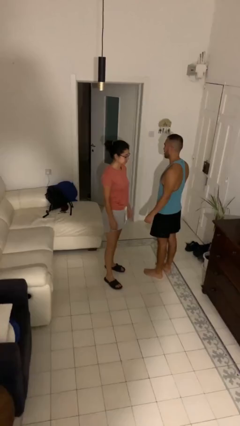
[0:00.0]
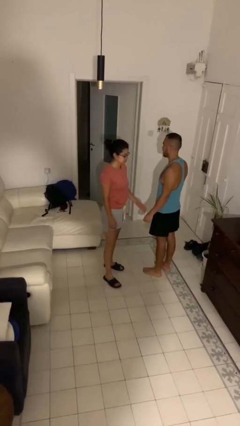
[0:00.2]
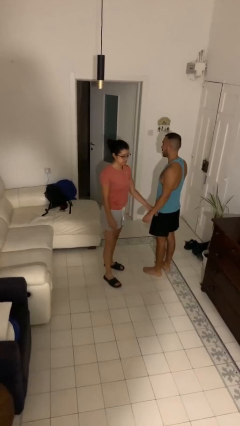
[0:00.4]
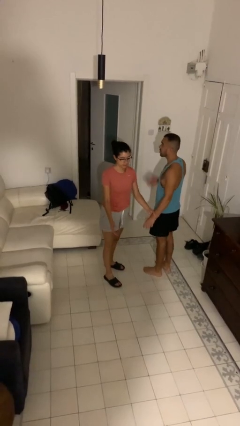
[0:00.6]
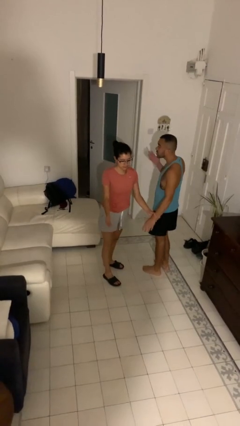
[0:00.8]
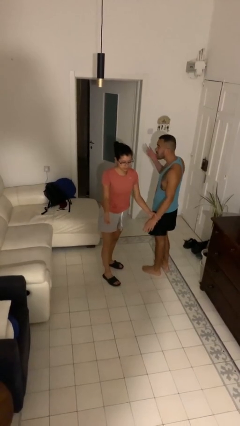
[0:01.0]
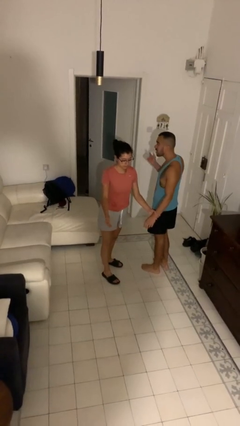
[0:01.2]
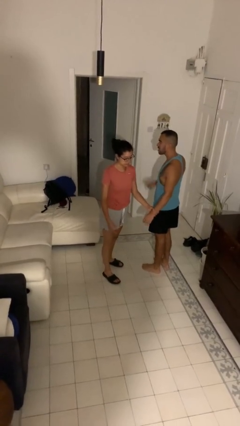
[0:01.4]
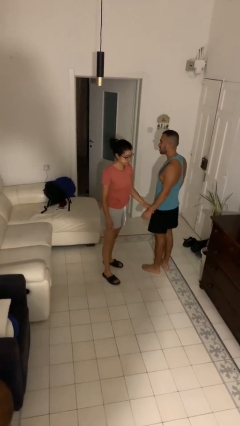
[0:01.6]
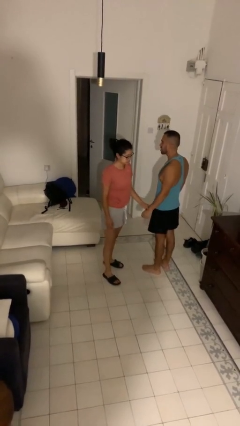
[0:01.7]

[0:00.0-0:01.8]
person grabs person by forearm

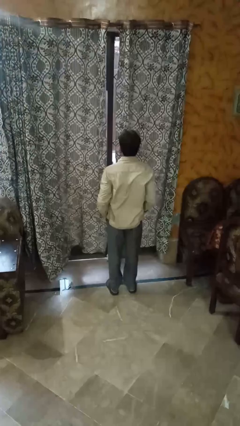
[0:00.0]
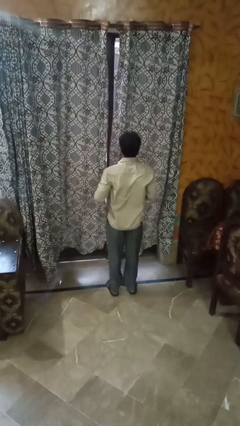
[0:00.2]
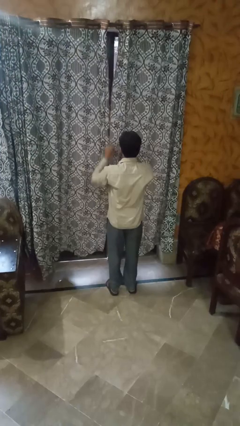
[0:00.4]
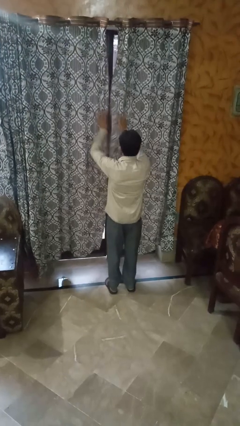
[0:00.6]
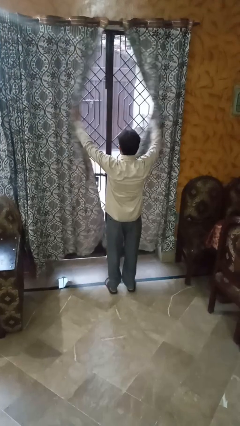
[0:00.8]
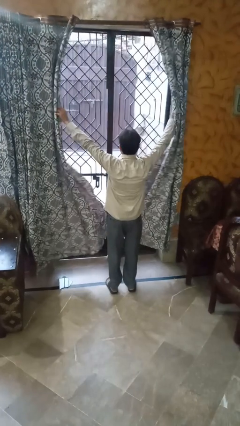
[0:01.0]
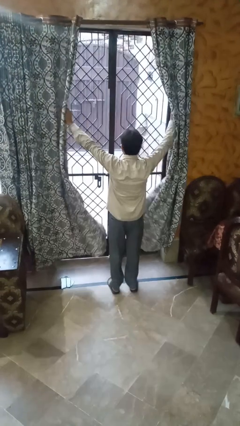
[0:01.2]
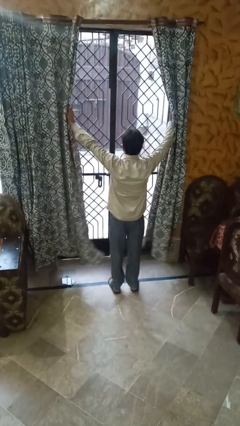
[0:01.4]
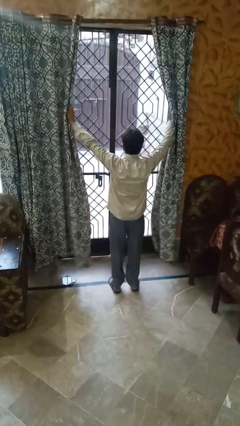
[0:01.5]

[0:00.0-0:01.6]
person opens curtains

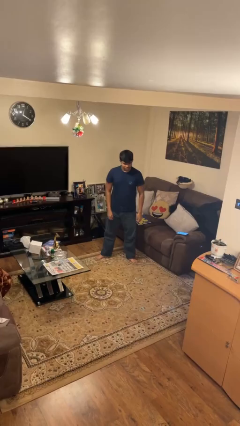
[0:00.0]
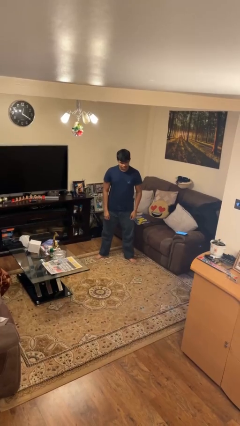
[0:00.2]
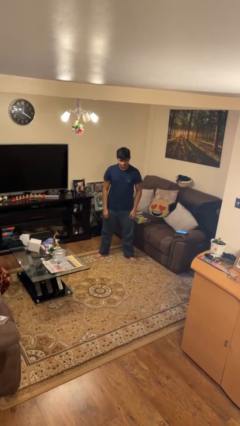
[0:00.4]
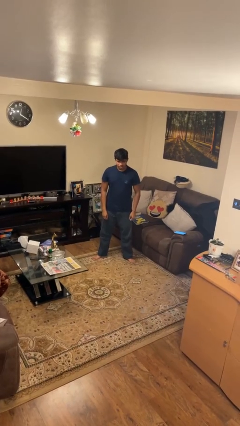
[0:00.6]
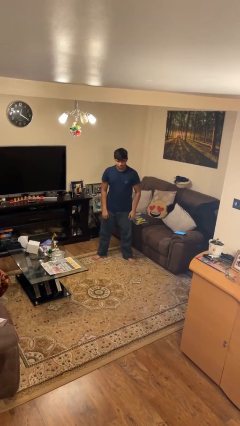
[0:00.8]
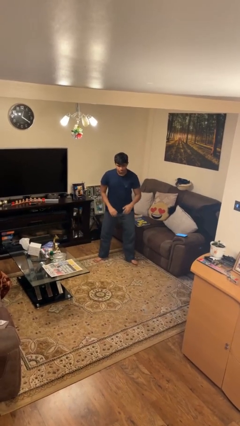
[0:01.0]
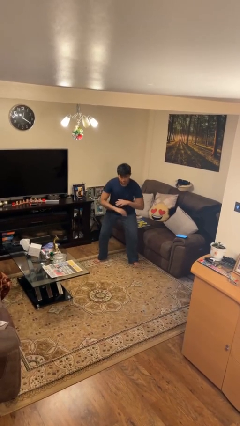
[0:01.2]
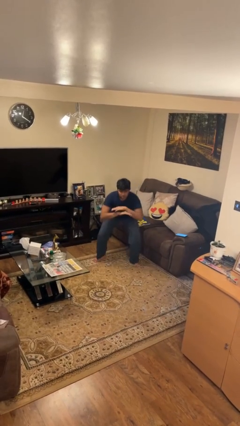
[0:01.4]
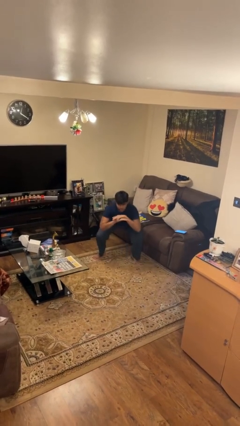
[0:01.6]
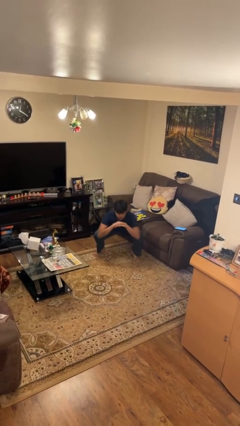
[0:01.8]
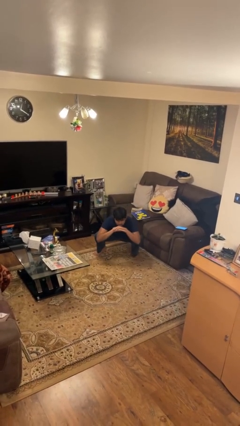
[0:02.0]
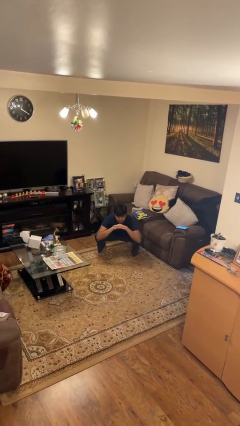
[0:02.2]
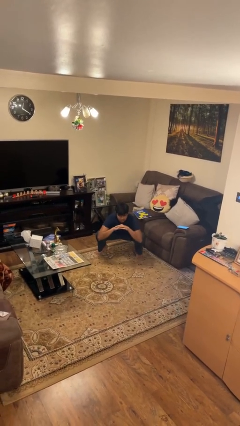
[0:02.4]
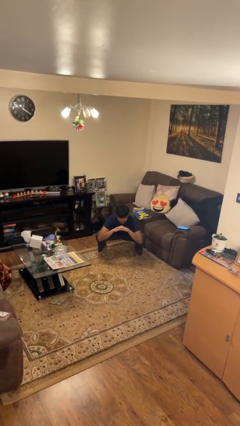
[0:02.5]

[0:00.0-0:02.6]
person squats

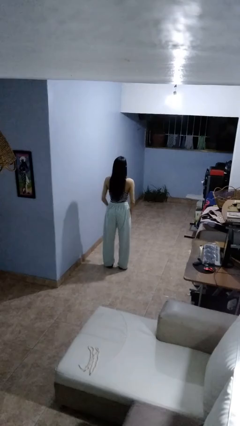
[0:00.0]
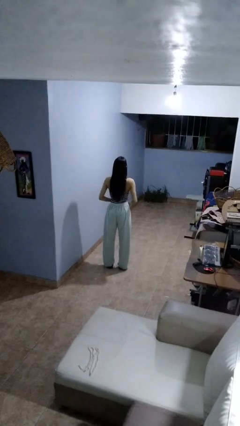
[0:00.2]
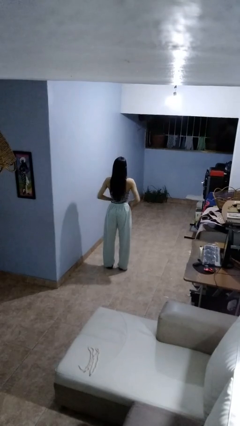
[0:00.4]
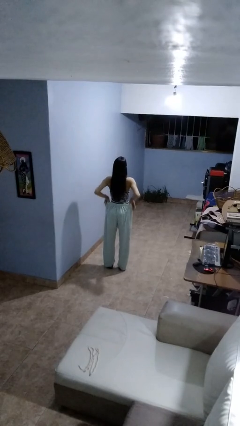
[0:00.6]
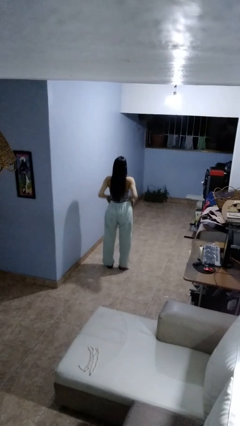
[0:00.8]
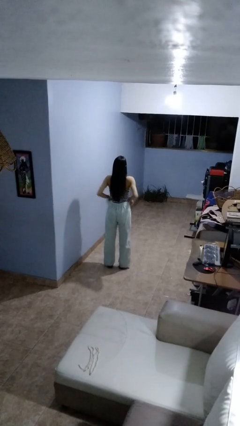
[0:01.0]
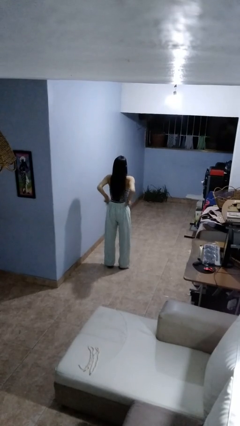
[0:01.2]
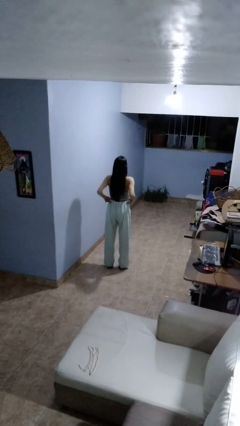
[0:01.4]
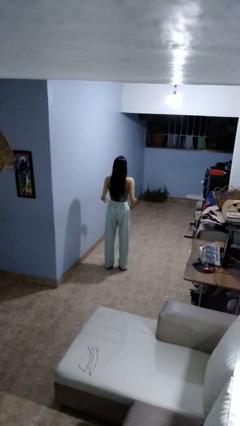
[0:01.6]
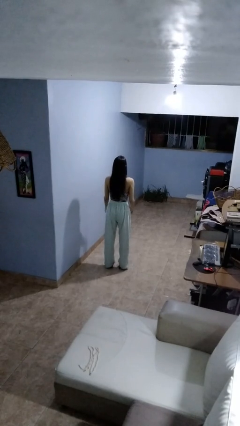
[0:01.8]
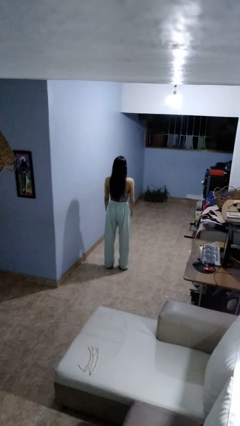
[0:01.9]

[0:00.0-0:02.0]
person hikes up pants

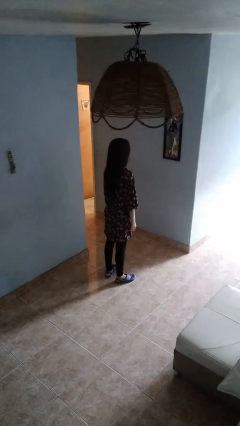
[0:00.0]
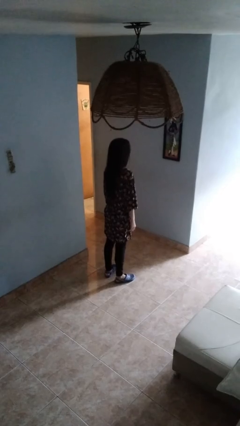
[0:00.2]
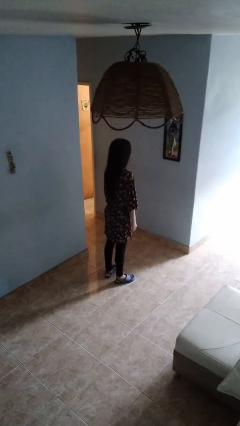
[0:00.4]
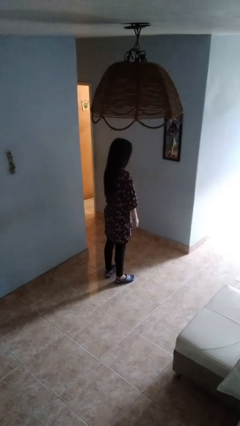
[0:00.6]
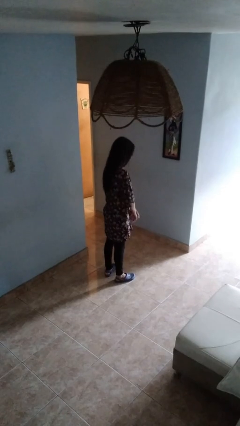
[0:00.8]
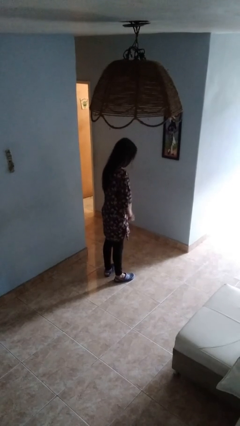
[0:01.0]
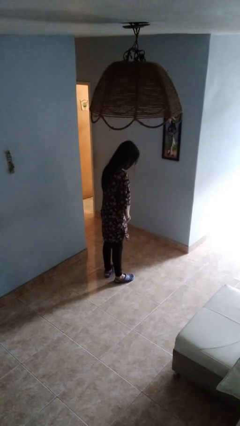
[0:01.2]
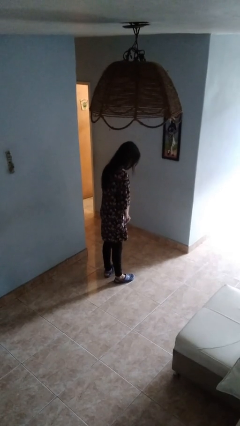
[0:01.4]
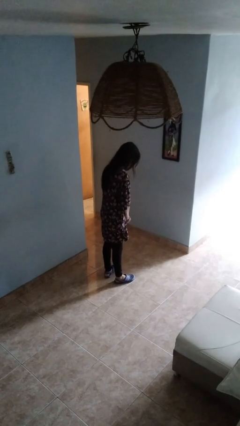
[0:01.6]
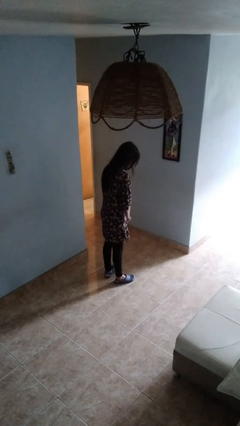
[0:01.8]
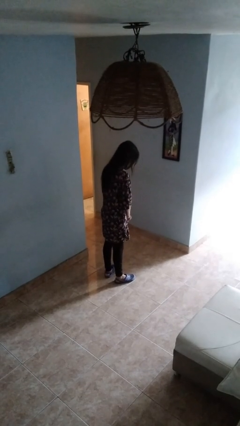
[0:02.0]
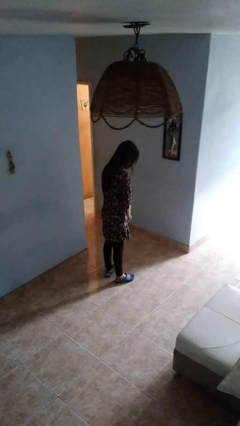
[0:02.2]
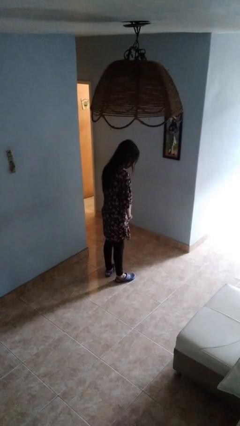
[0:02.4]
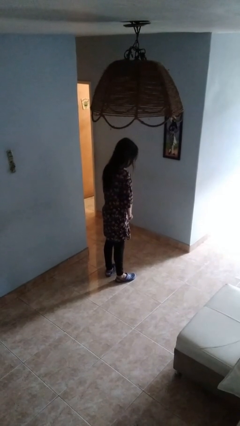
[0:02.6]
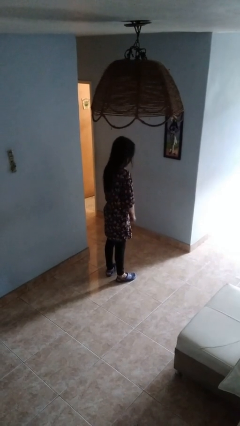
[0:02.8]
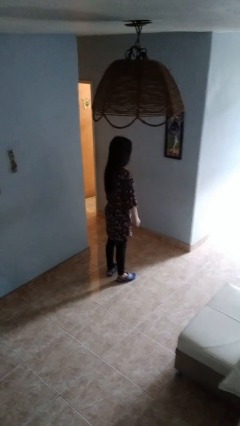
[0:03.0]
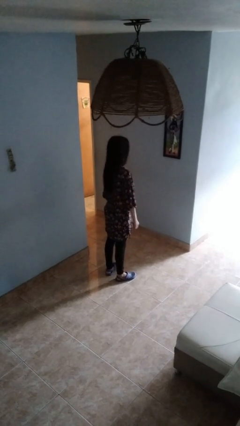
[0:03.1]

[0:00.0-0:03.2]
person prays

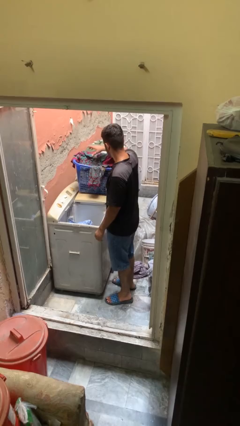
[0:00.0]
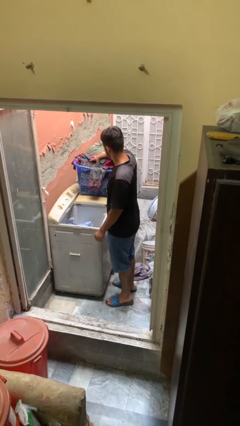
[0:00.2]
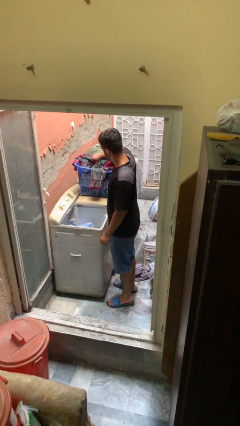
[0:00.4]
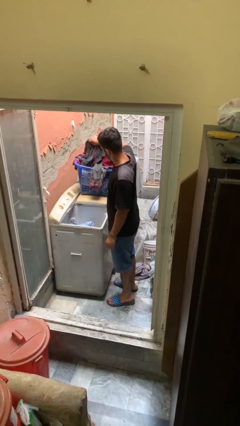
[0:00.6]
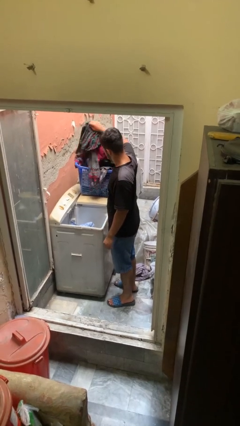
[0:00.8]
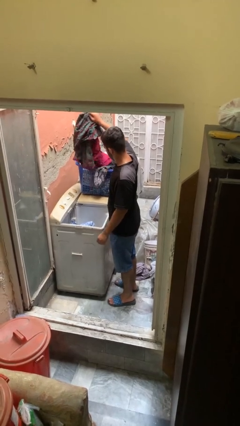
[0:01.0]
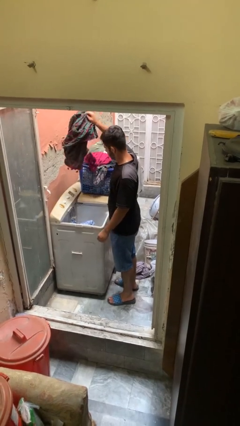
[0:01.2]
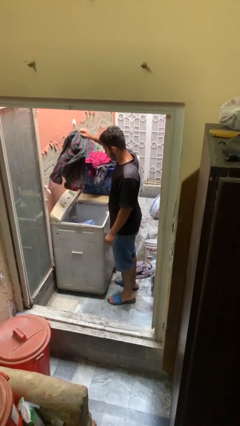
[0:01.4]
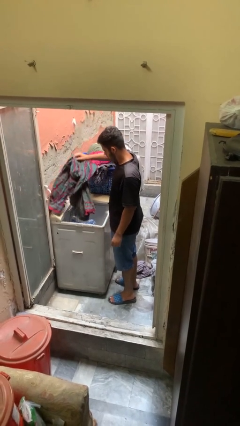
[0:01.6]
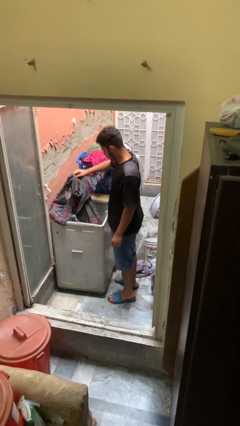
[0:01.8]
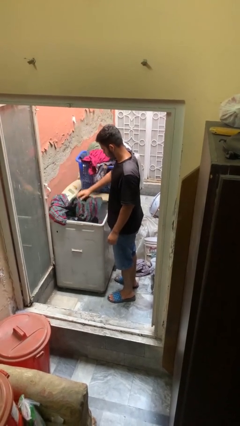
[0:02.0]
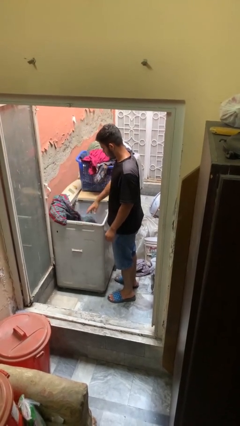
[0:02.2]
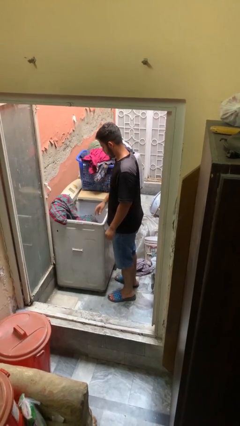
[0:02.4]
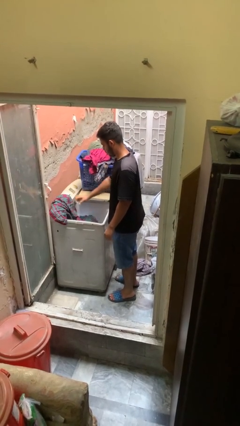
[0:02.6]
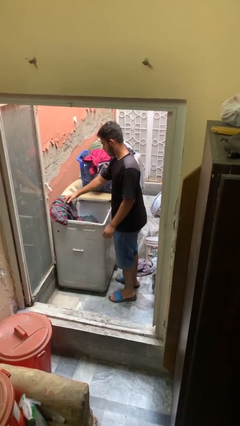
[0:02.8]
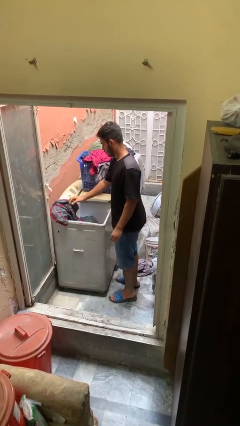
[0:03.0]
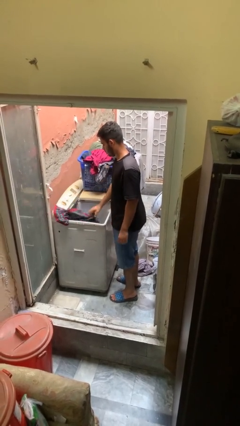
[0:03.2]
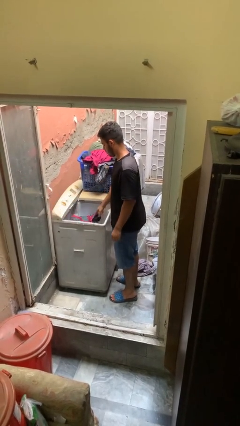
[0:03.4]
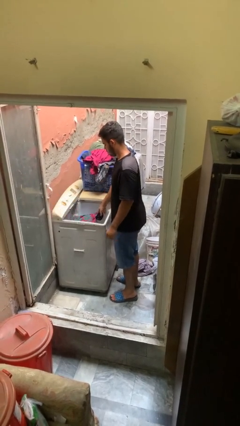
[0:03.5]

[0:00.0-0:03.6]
person loads clotheswasher

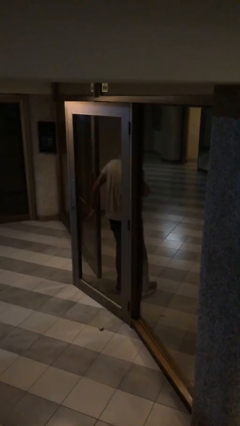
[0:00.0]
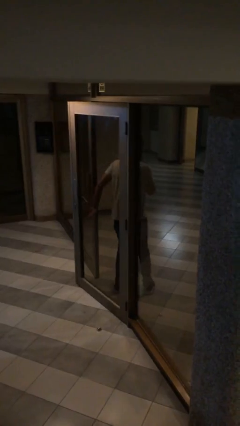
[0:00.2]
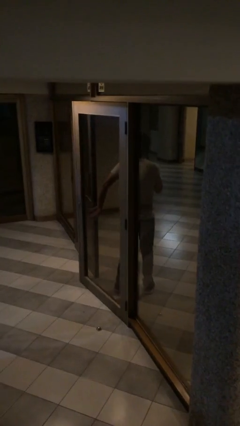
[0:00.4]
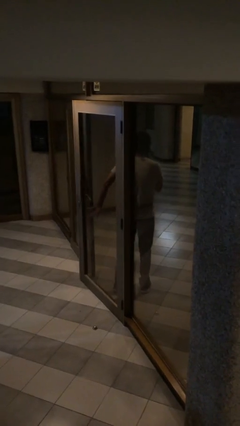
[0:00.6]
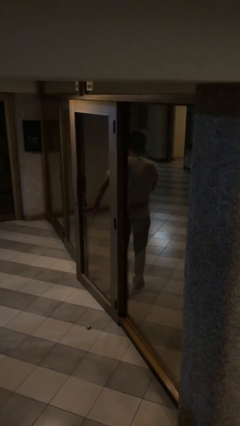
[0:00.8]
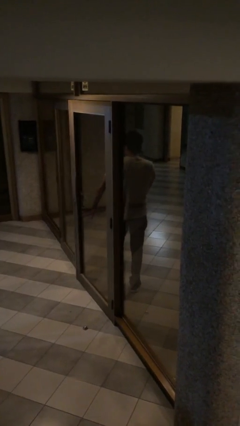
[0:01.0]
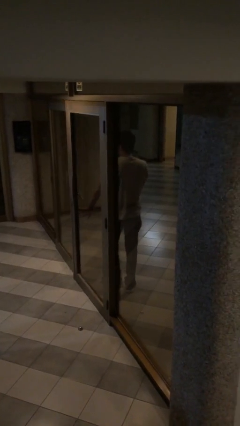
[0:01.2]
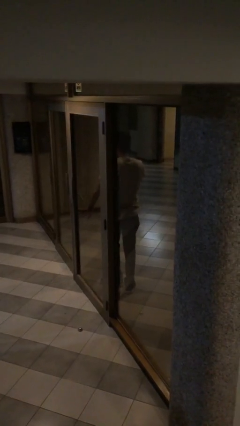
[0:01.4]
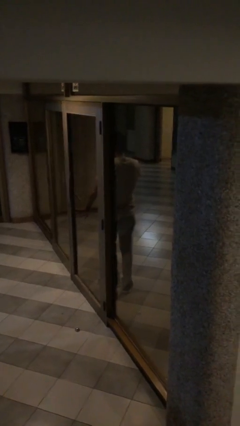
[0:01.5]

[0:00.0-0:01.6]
person closes facility door

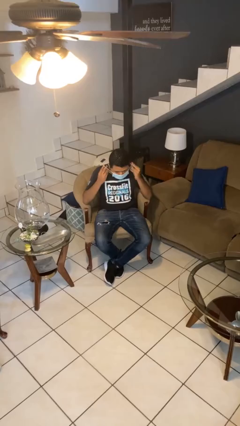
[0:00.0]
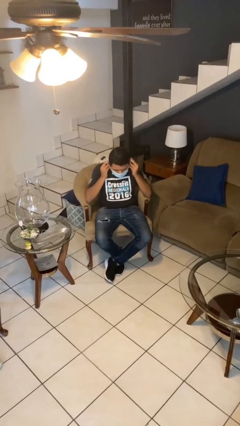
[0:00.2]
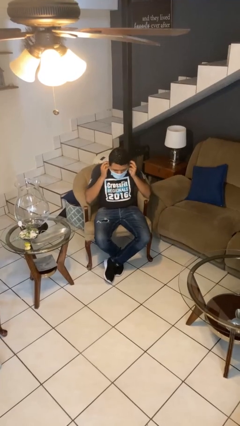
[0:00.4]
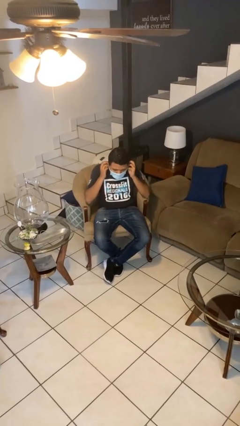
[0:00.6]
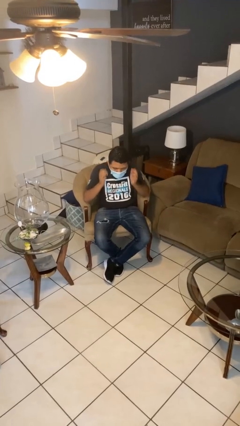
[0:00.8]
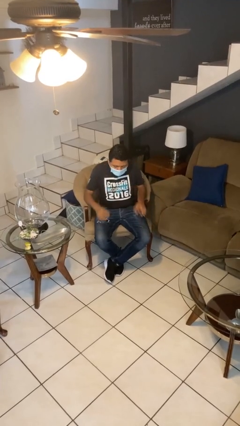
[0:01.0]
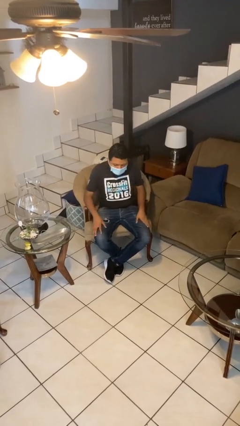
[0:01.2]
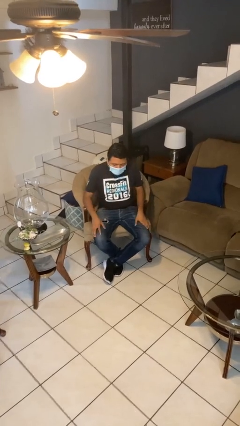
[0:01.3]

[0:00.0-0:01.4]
person puts on facemask
